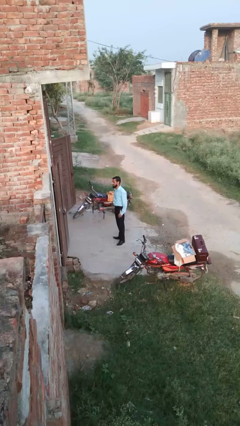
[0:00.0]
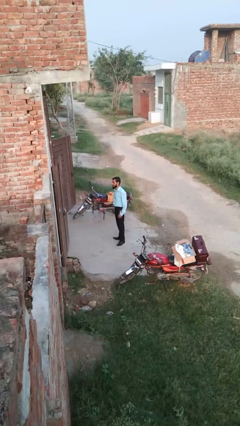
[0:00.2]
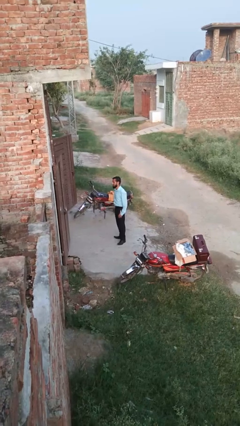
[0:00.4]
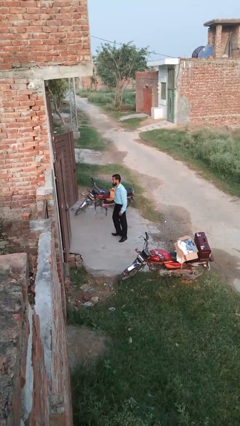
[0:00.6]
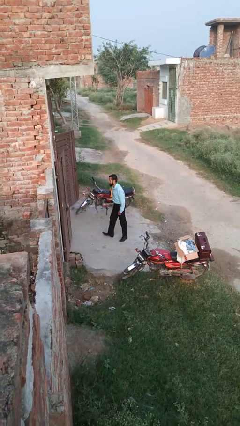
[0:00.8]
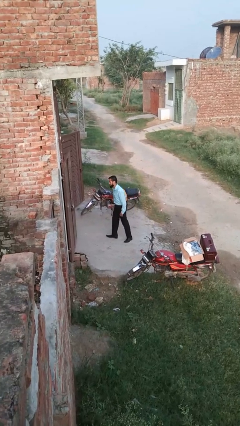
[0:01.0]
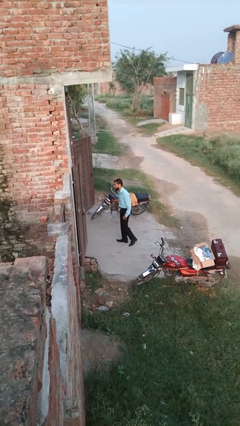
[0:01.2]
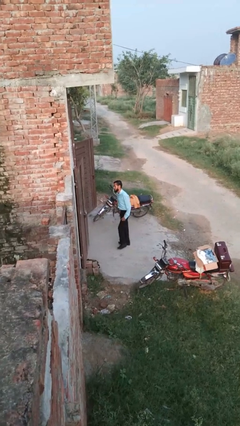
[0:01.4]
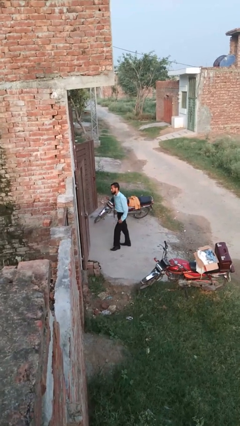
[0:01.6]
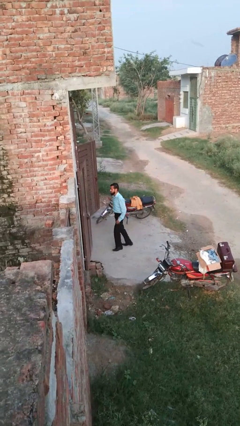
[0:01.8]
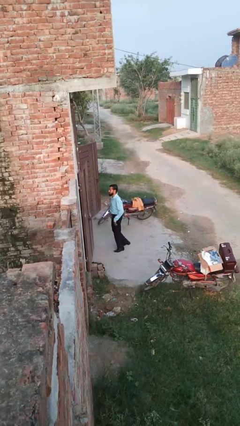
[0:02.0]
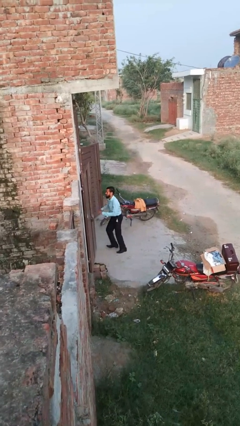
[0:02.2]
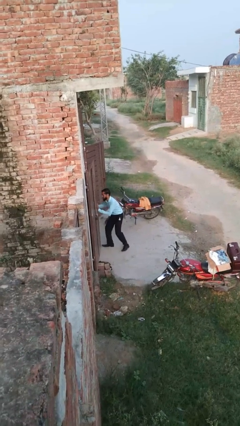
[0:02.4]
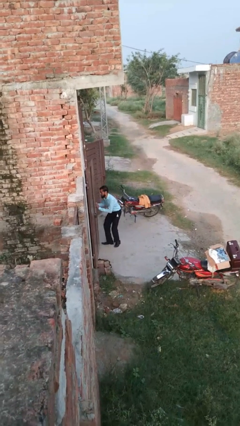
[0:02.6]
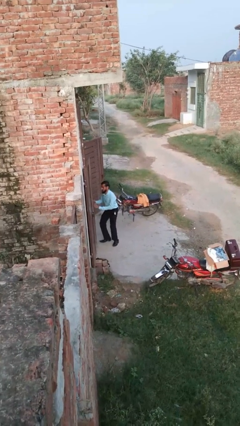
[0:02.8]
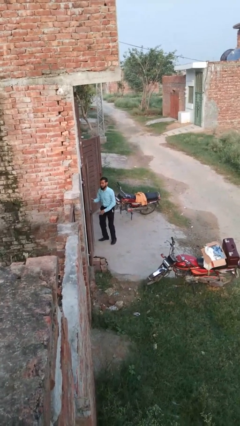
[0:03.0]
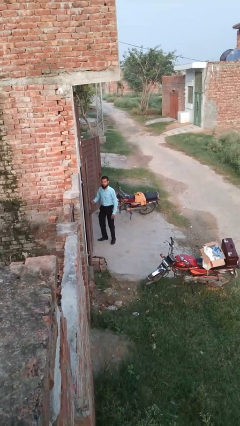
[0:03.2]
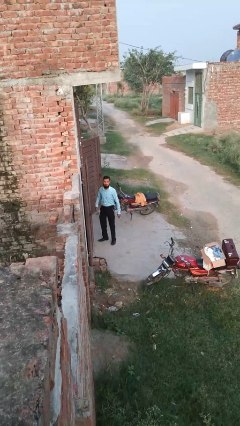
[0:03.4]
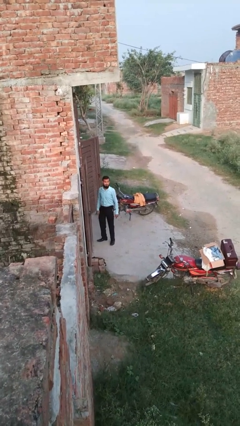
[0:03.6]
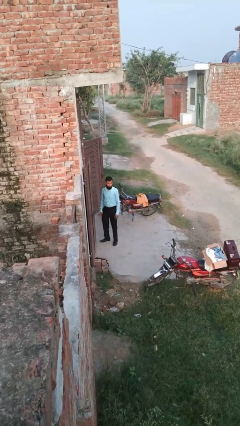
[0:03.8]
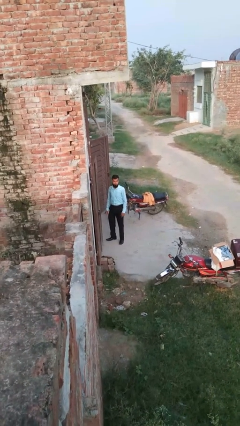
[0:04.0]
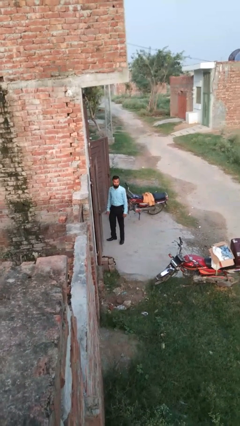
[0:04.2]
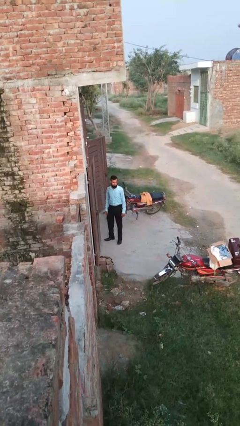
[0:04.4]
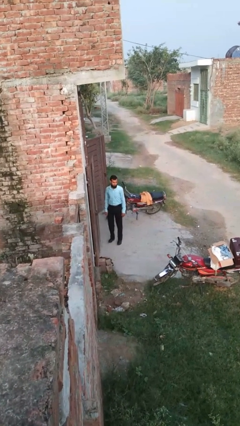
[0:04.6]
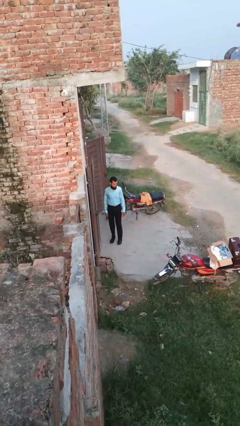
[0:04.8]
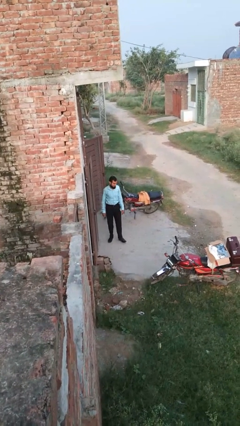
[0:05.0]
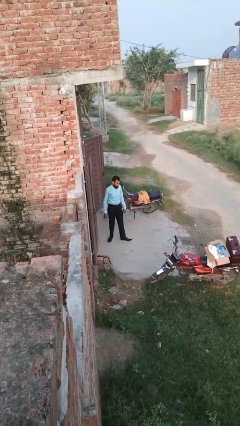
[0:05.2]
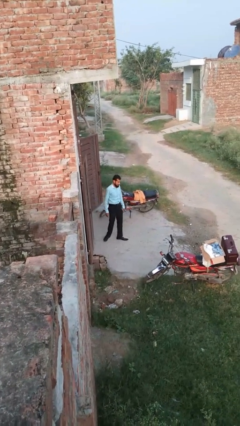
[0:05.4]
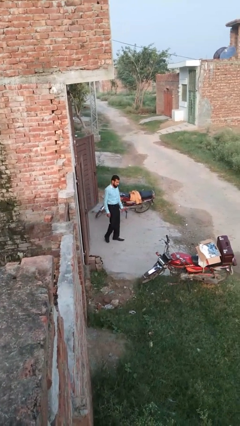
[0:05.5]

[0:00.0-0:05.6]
person bumps into wall

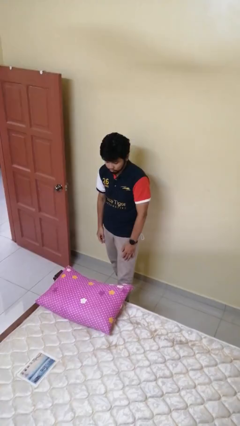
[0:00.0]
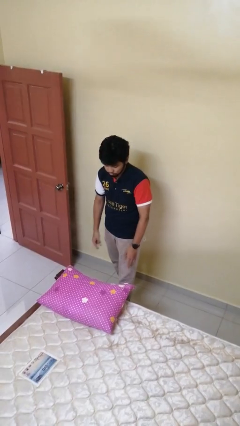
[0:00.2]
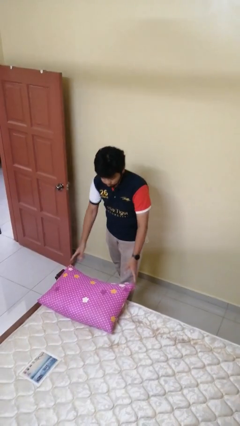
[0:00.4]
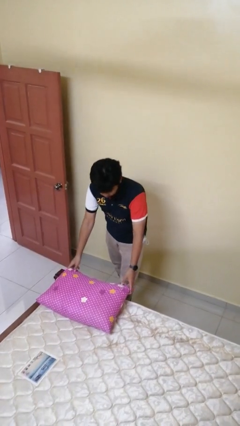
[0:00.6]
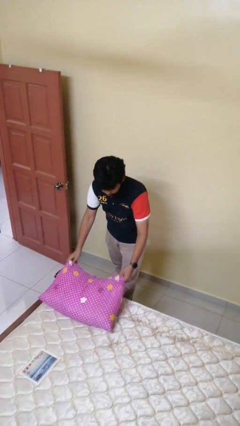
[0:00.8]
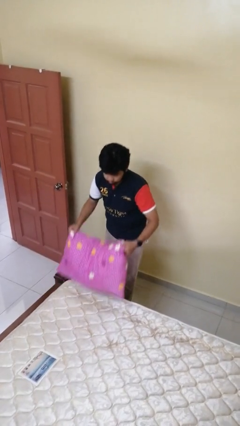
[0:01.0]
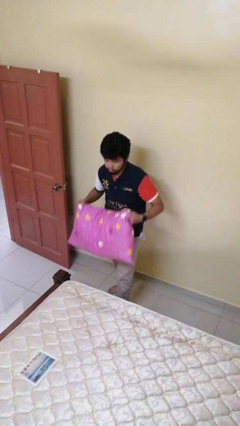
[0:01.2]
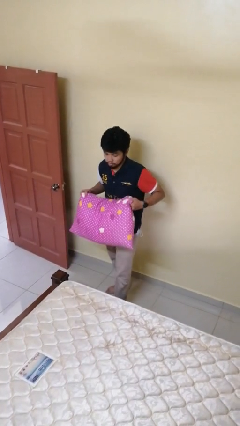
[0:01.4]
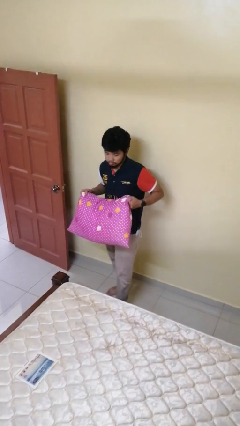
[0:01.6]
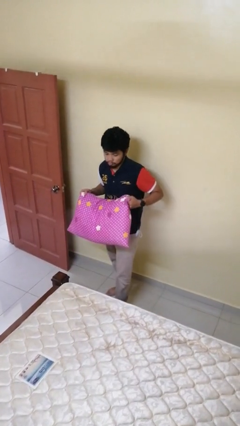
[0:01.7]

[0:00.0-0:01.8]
person picks up object from bed

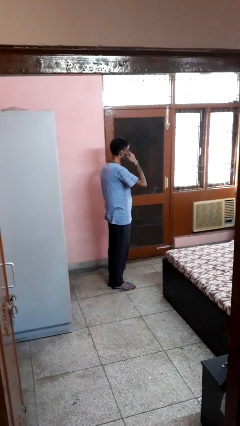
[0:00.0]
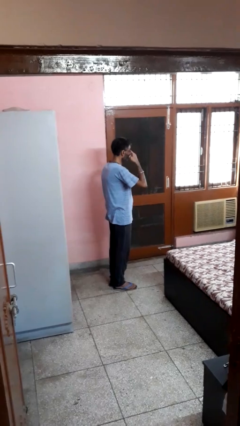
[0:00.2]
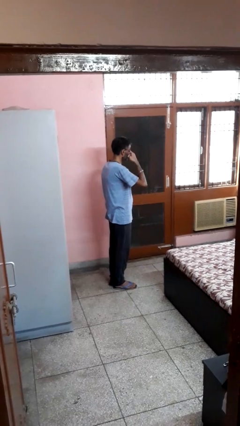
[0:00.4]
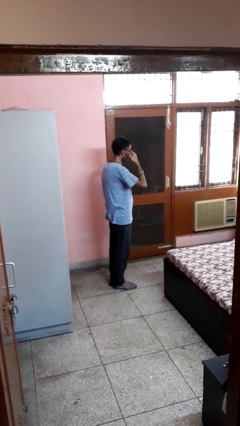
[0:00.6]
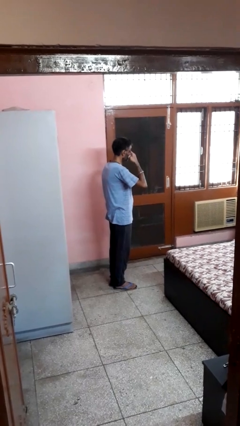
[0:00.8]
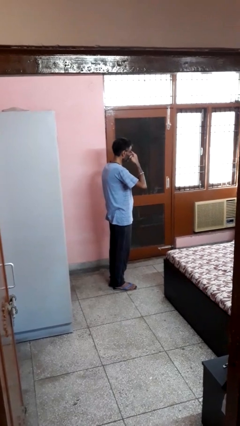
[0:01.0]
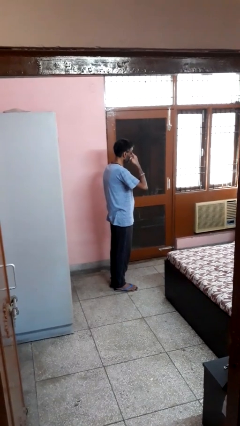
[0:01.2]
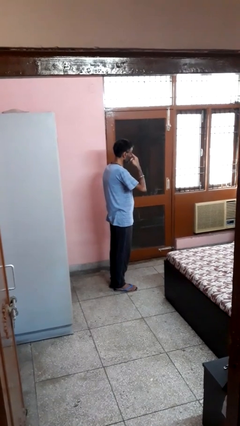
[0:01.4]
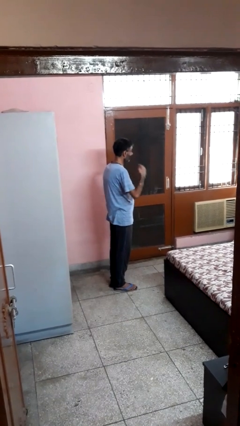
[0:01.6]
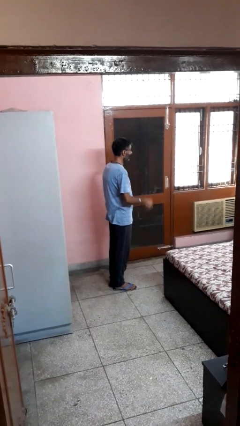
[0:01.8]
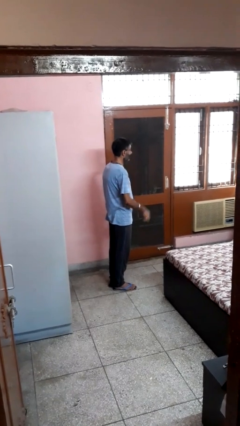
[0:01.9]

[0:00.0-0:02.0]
person rubs eyes

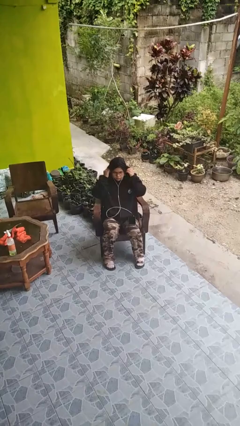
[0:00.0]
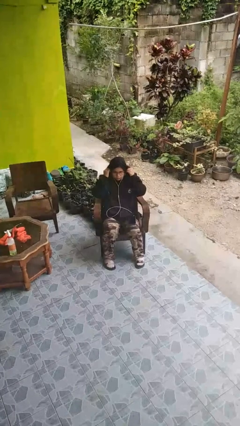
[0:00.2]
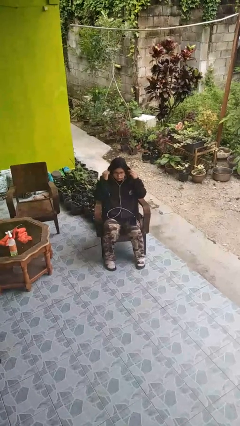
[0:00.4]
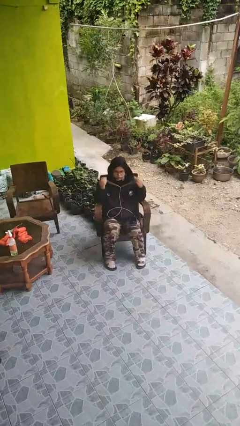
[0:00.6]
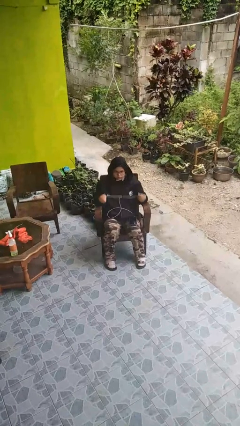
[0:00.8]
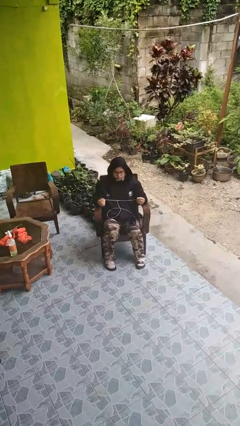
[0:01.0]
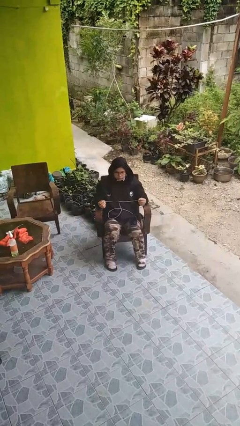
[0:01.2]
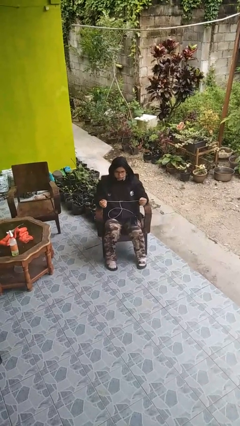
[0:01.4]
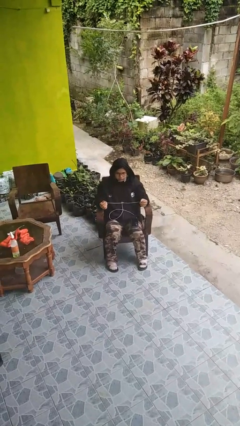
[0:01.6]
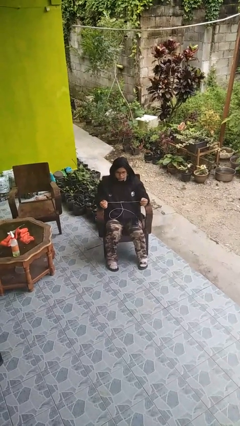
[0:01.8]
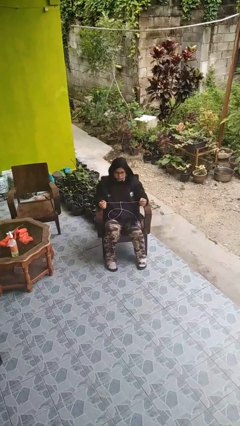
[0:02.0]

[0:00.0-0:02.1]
person takes off headphones

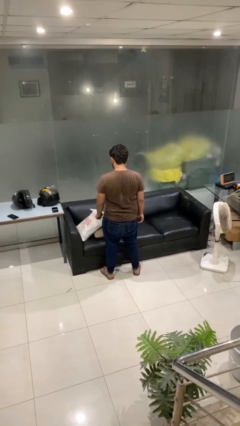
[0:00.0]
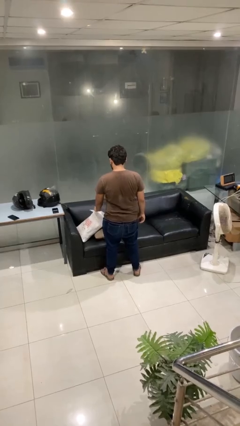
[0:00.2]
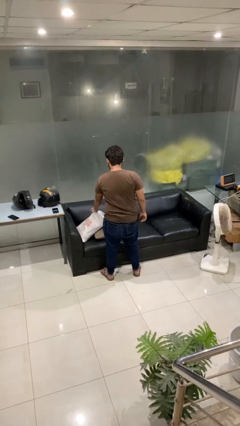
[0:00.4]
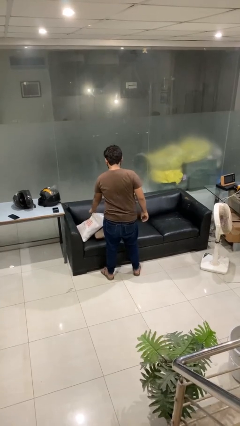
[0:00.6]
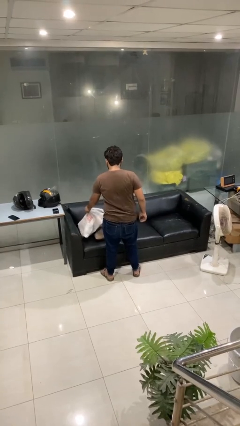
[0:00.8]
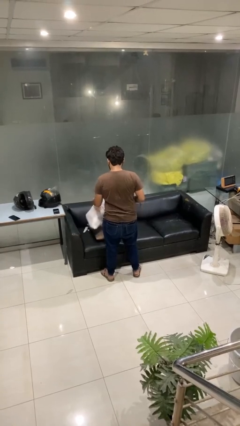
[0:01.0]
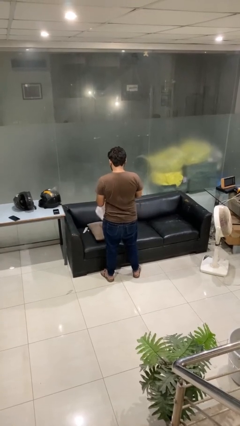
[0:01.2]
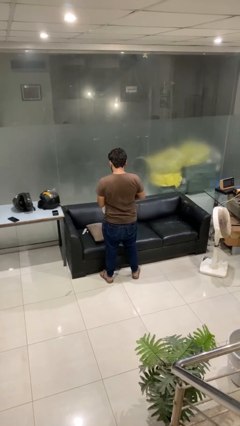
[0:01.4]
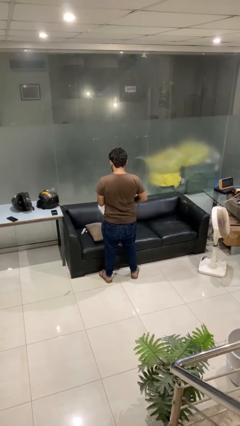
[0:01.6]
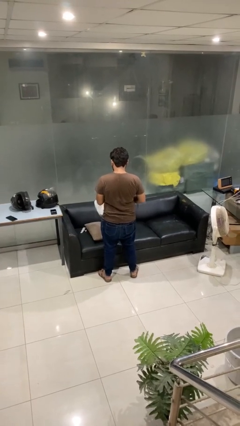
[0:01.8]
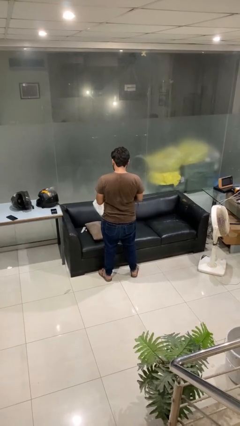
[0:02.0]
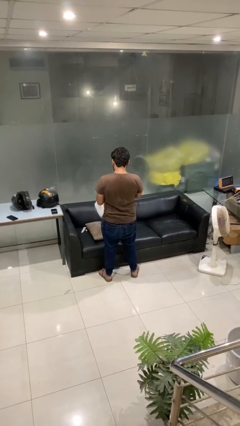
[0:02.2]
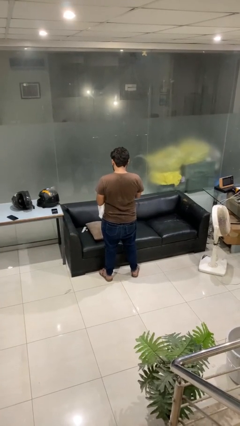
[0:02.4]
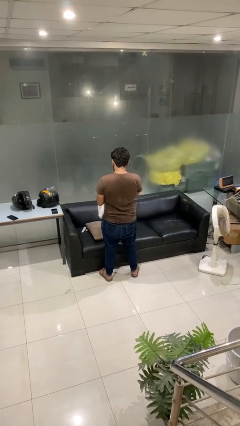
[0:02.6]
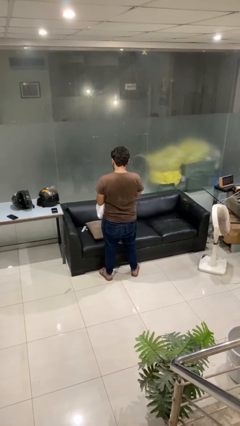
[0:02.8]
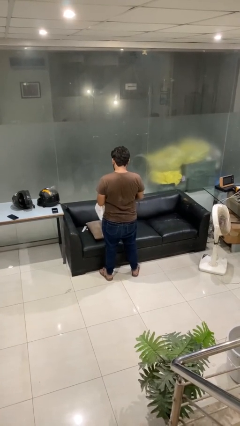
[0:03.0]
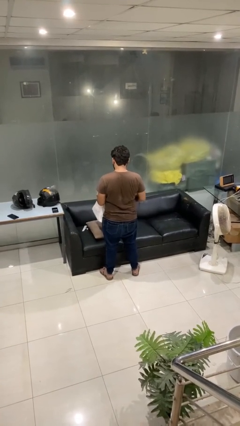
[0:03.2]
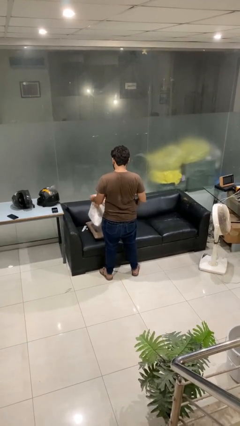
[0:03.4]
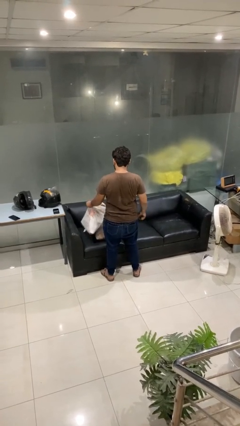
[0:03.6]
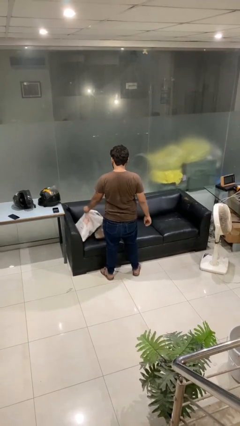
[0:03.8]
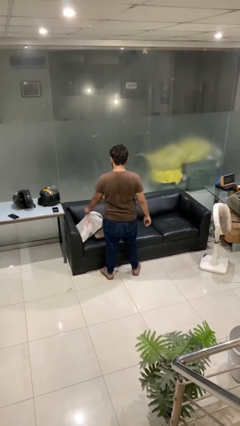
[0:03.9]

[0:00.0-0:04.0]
person searches in bag

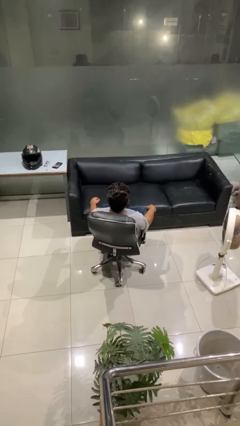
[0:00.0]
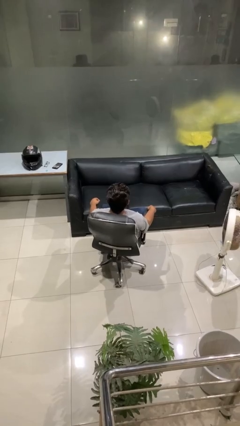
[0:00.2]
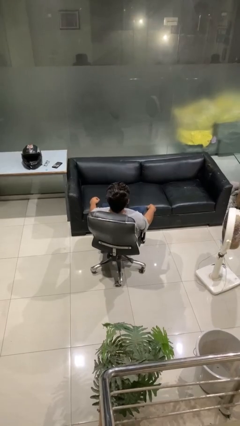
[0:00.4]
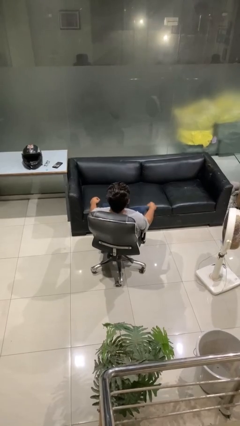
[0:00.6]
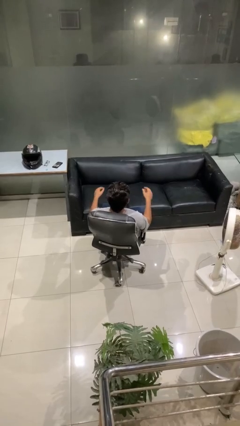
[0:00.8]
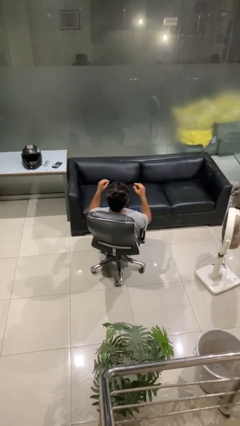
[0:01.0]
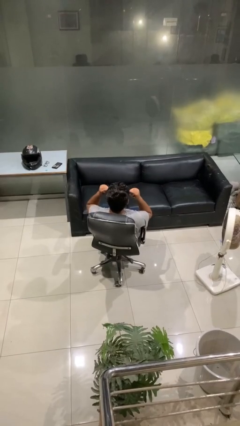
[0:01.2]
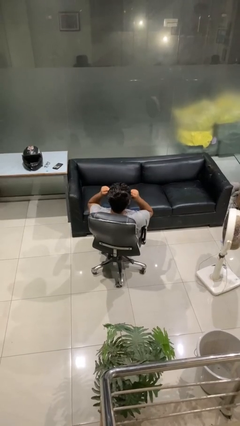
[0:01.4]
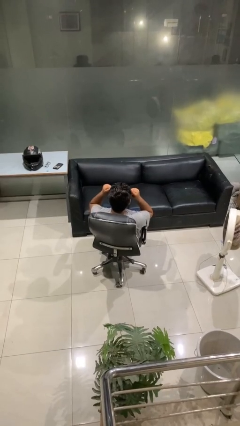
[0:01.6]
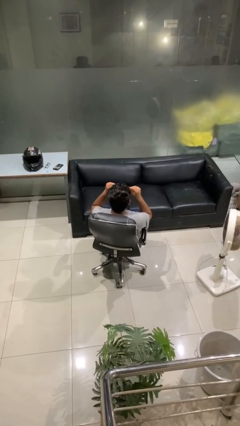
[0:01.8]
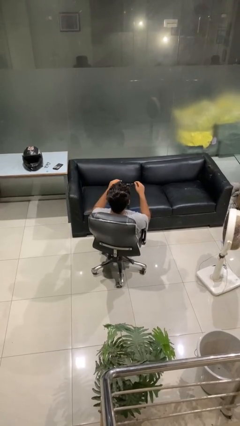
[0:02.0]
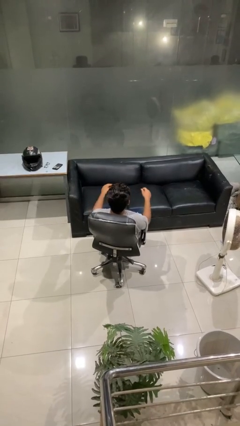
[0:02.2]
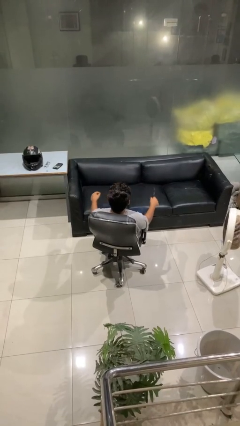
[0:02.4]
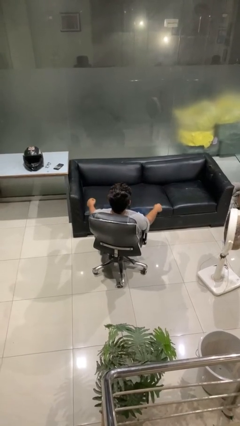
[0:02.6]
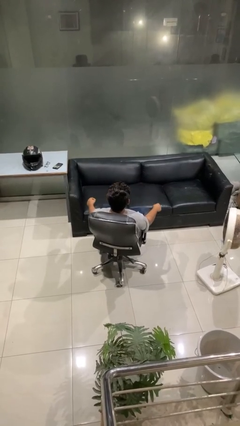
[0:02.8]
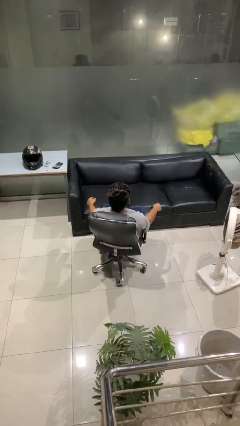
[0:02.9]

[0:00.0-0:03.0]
person takes off sunglasses
